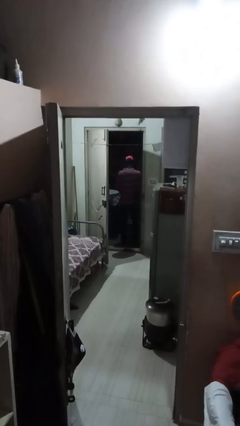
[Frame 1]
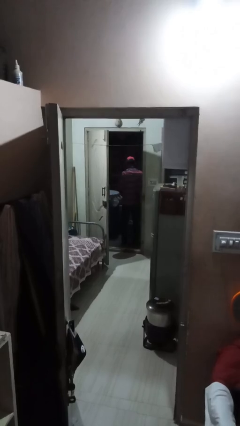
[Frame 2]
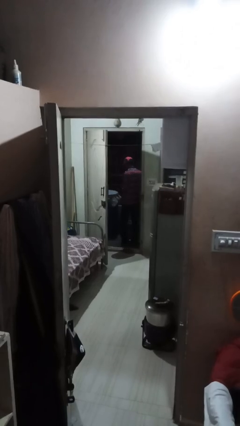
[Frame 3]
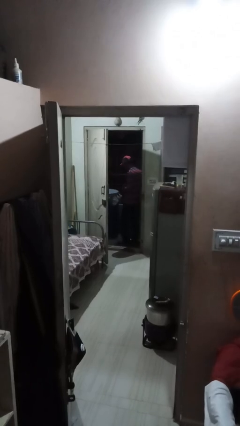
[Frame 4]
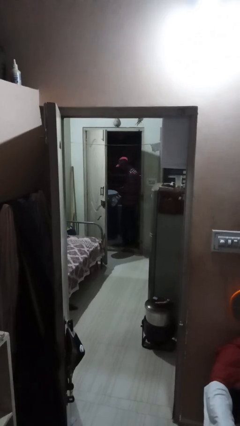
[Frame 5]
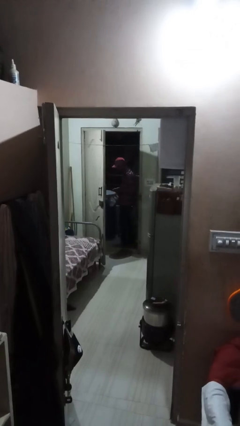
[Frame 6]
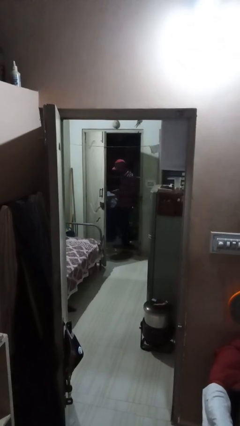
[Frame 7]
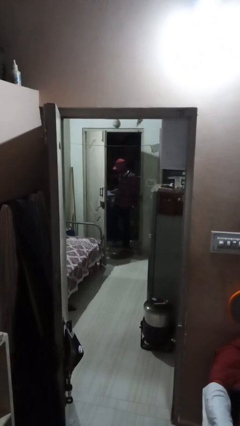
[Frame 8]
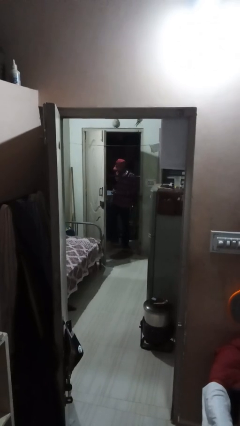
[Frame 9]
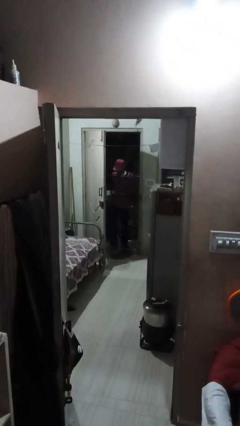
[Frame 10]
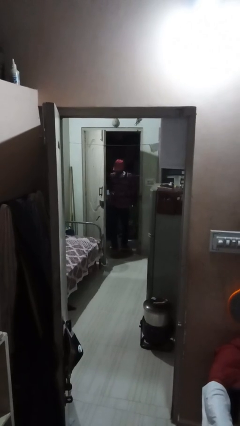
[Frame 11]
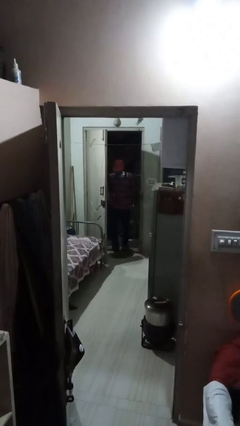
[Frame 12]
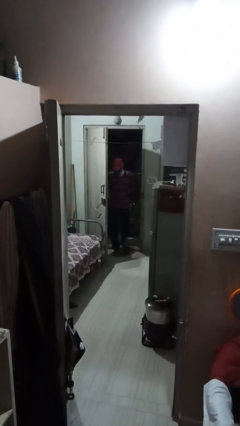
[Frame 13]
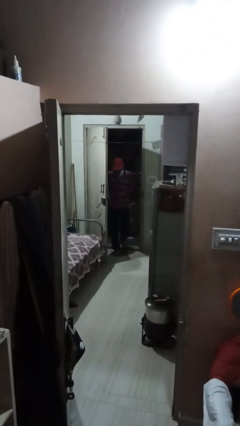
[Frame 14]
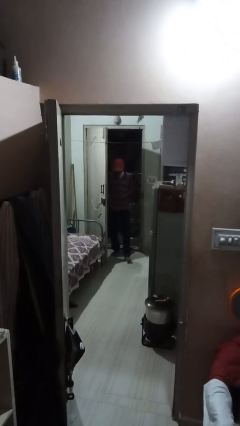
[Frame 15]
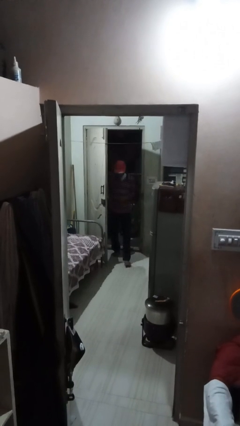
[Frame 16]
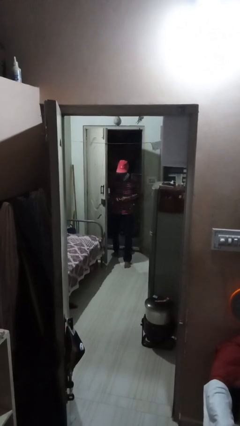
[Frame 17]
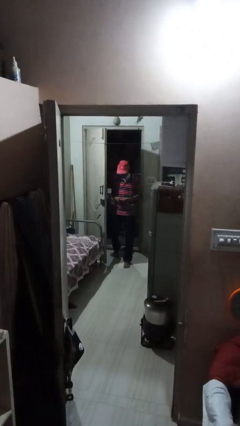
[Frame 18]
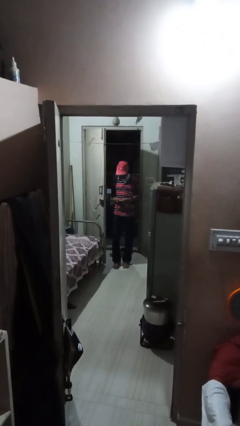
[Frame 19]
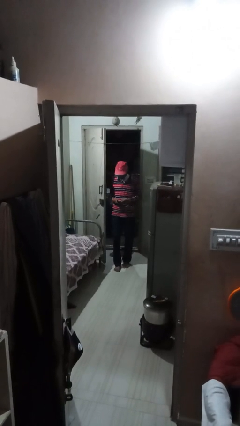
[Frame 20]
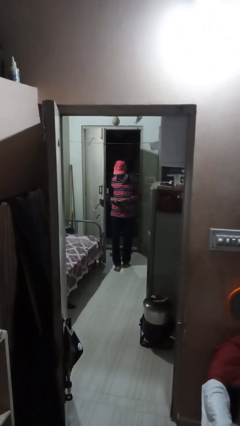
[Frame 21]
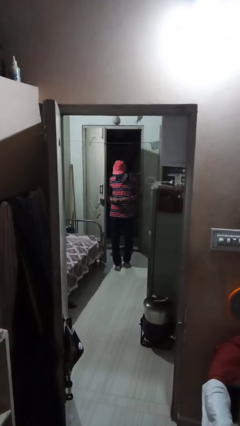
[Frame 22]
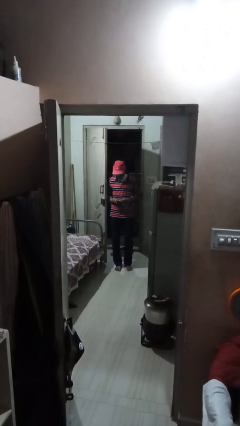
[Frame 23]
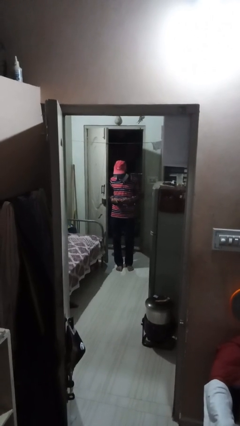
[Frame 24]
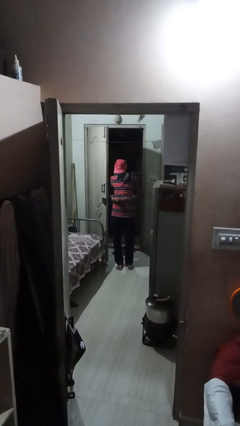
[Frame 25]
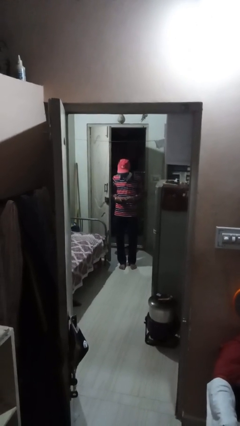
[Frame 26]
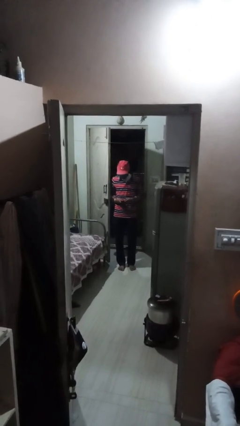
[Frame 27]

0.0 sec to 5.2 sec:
person enters scene through structure

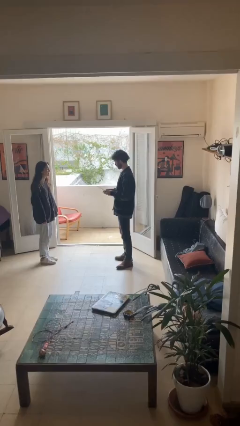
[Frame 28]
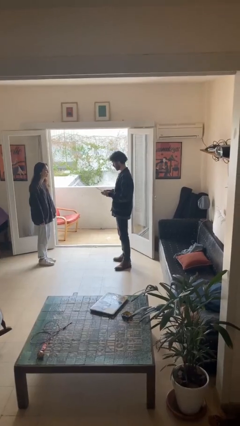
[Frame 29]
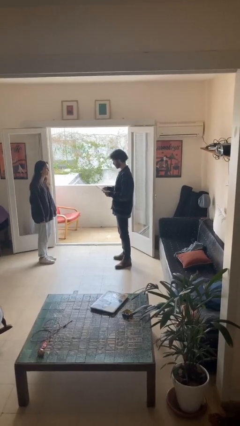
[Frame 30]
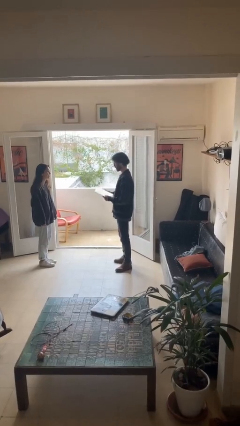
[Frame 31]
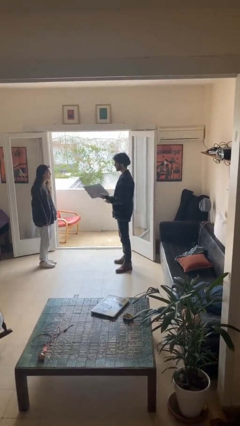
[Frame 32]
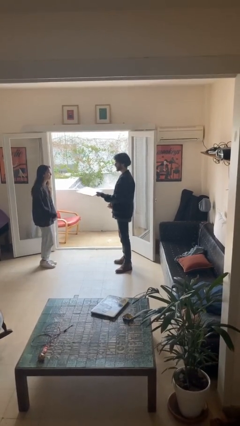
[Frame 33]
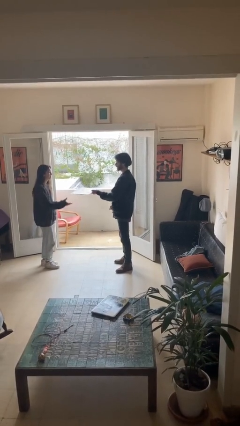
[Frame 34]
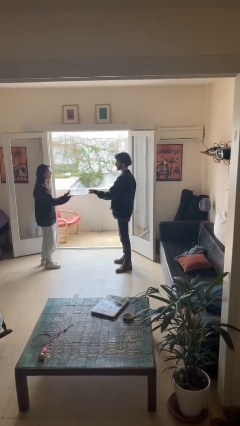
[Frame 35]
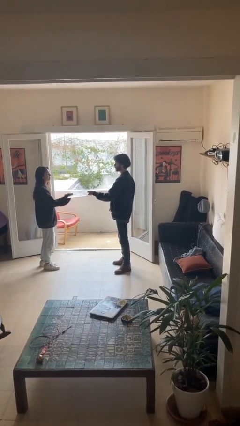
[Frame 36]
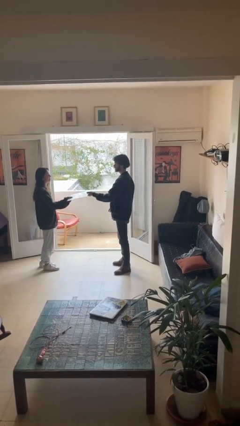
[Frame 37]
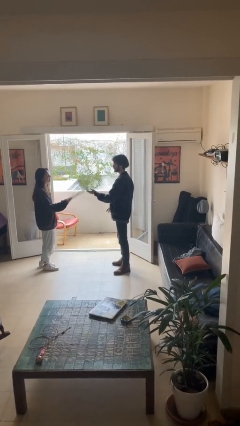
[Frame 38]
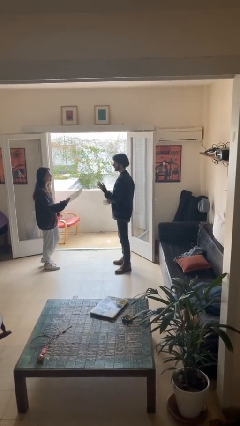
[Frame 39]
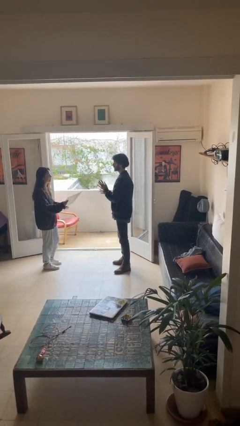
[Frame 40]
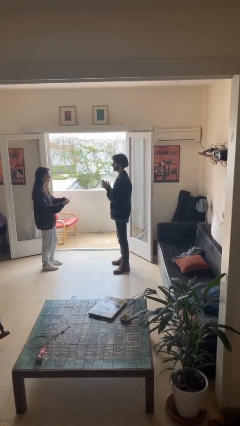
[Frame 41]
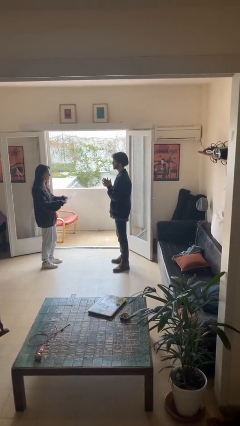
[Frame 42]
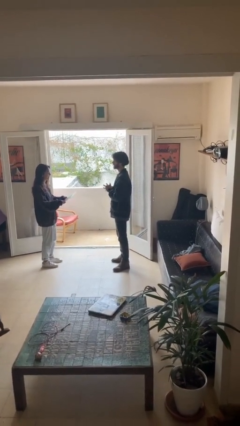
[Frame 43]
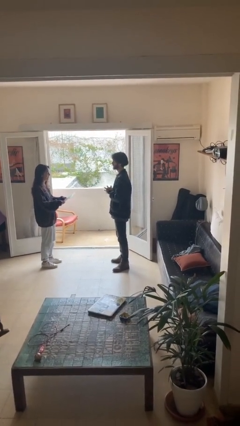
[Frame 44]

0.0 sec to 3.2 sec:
person transfers object to person

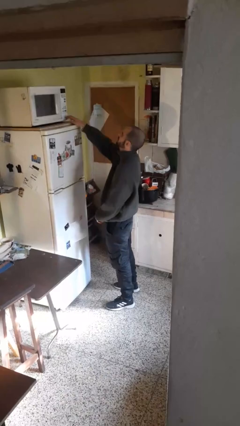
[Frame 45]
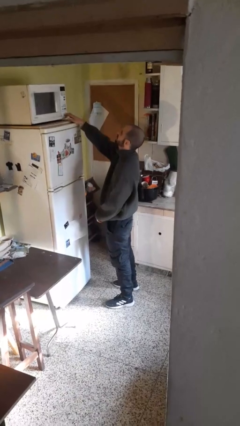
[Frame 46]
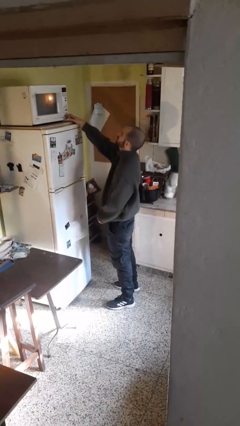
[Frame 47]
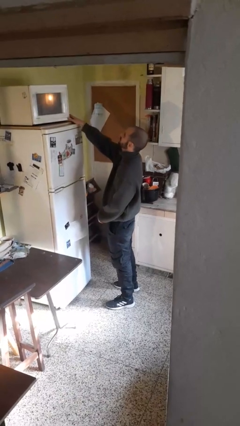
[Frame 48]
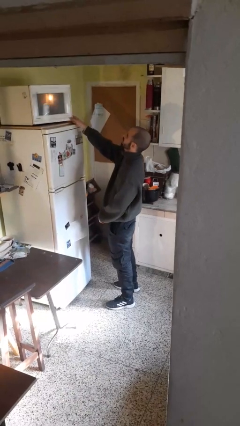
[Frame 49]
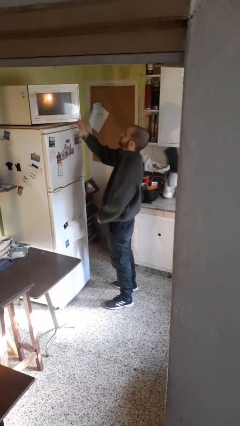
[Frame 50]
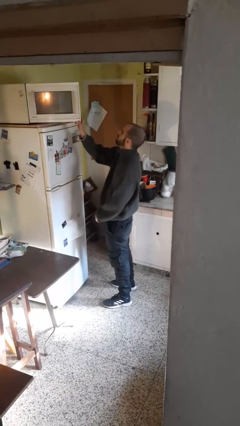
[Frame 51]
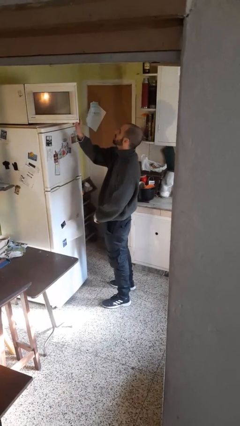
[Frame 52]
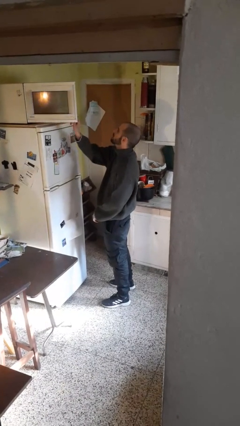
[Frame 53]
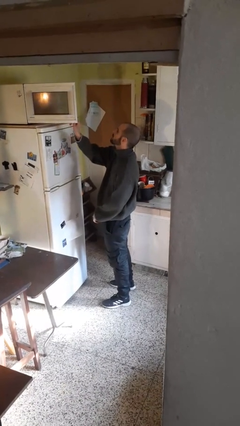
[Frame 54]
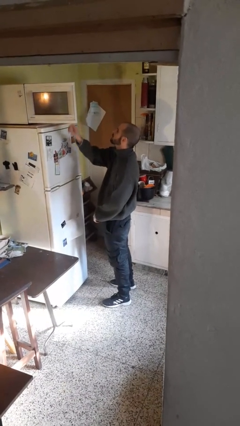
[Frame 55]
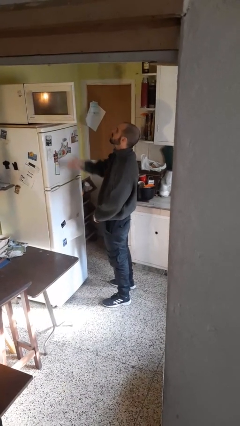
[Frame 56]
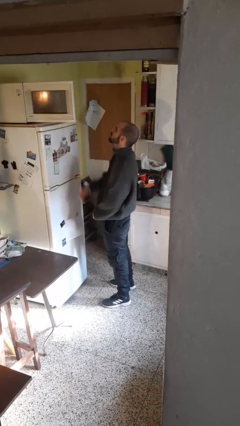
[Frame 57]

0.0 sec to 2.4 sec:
person opens microwave

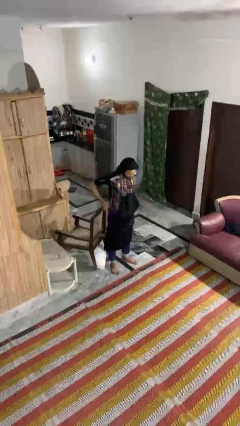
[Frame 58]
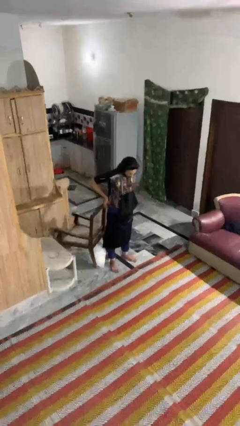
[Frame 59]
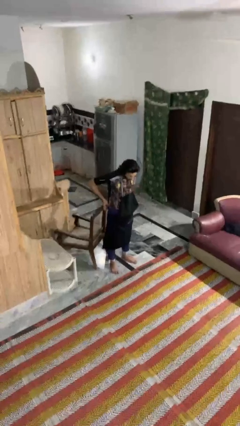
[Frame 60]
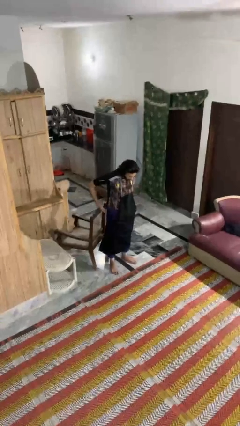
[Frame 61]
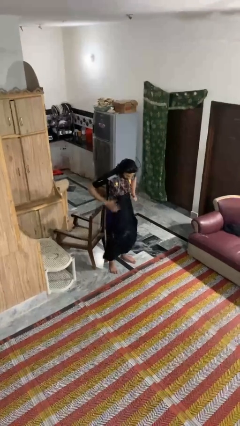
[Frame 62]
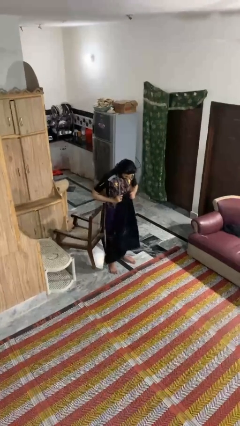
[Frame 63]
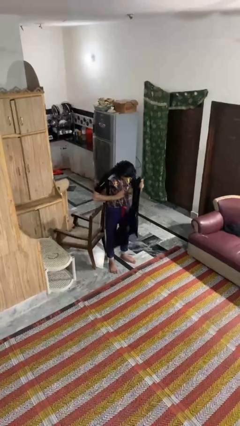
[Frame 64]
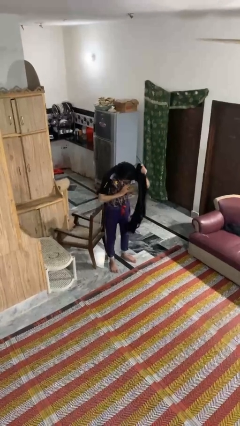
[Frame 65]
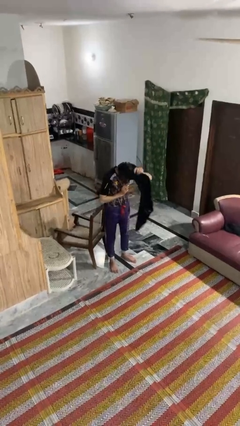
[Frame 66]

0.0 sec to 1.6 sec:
person takes off apron

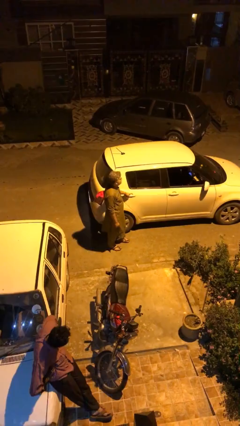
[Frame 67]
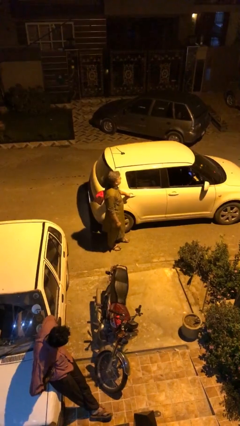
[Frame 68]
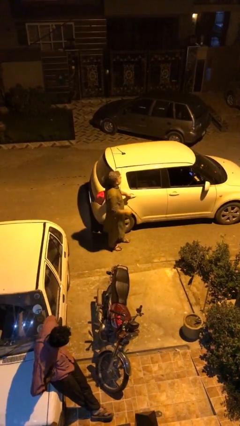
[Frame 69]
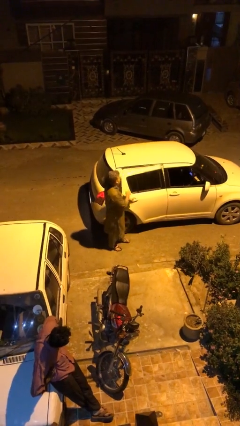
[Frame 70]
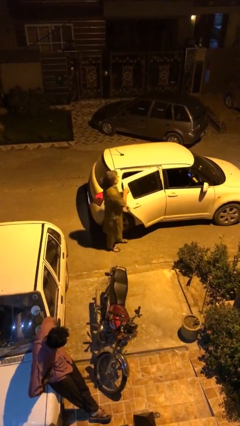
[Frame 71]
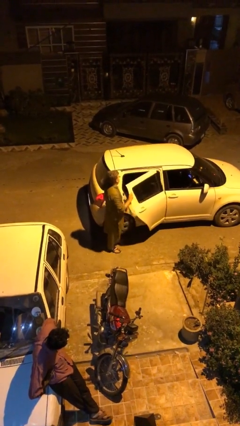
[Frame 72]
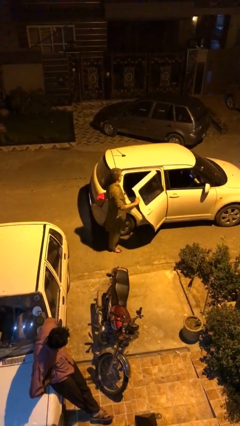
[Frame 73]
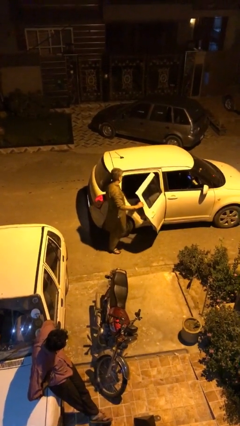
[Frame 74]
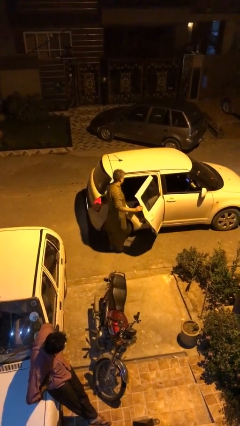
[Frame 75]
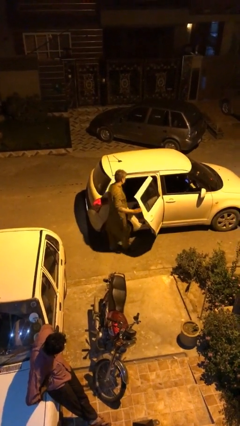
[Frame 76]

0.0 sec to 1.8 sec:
person opens car door

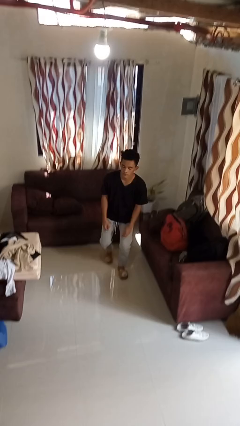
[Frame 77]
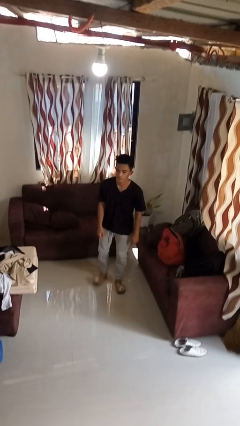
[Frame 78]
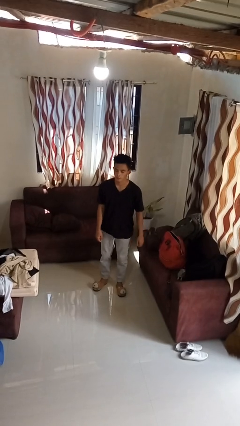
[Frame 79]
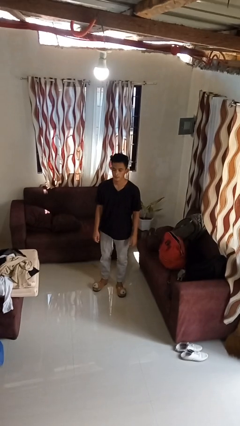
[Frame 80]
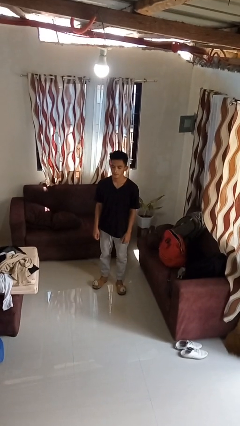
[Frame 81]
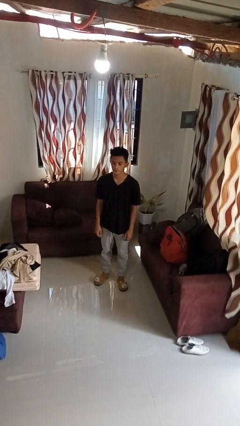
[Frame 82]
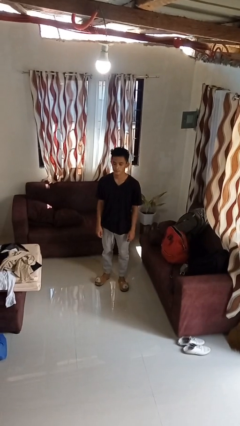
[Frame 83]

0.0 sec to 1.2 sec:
person stands up from floor

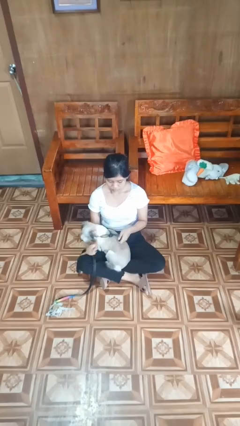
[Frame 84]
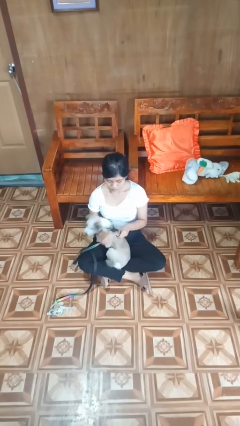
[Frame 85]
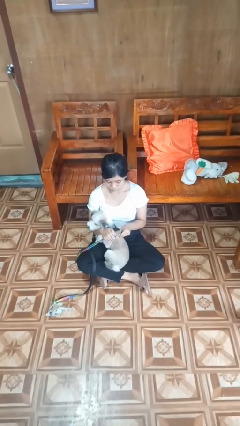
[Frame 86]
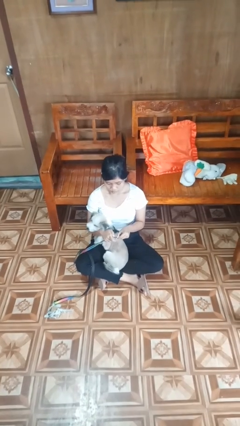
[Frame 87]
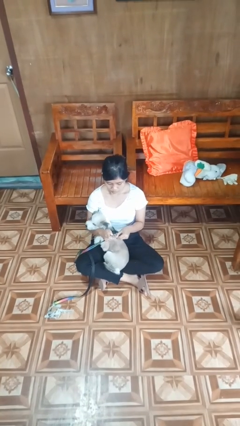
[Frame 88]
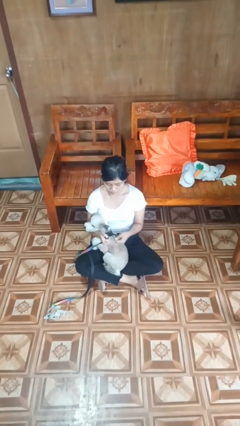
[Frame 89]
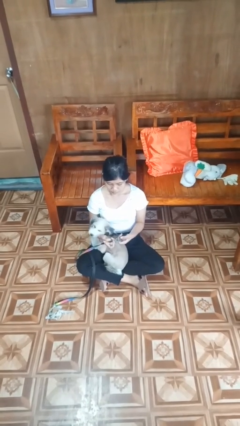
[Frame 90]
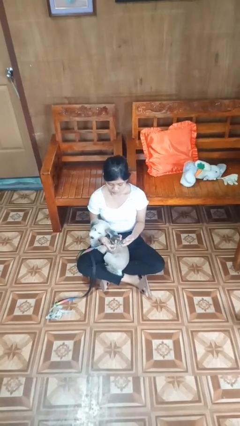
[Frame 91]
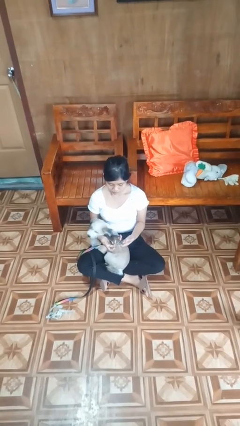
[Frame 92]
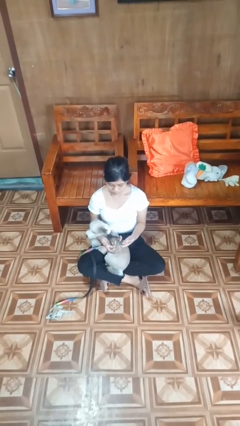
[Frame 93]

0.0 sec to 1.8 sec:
person attaches leash to dog
